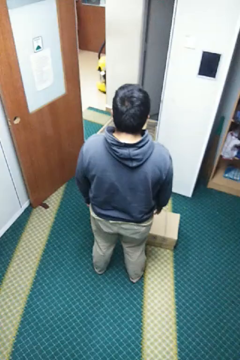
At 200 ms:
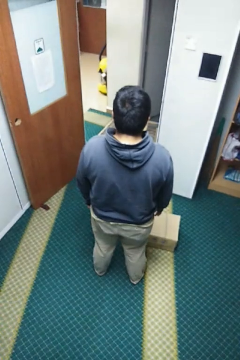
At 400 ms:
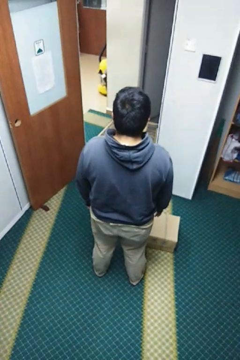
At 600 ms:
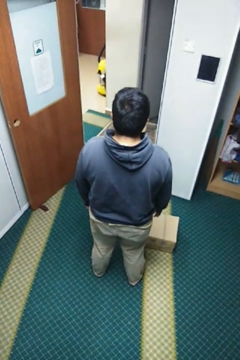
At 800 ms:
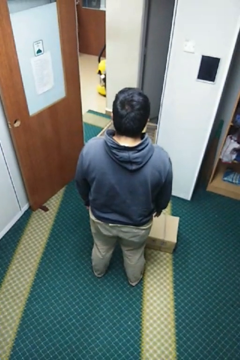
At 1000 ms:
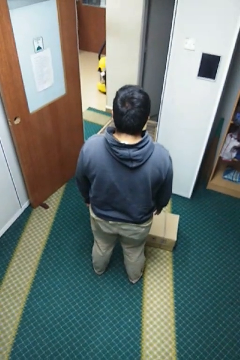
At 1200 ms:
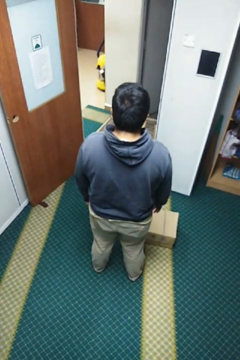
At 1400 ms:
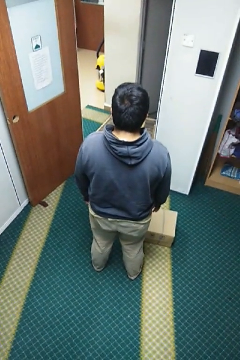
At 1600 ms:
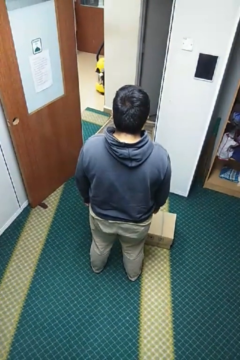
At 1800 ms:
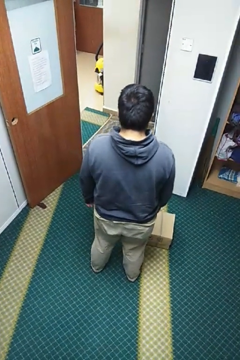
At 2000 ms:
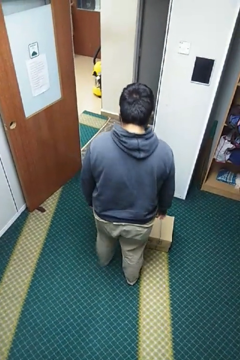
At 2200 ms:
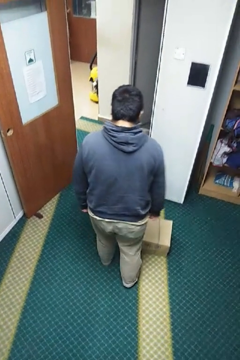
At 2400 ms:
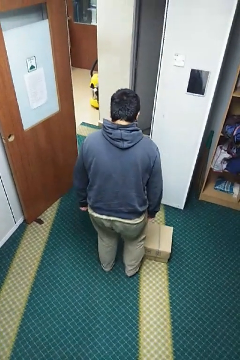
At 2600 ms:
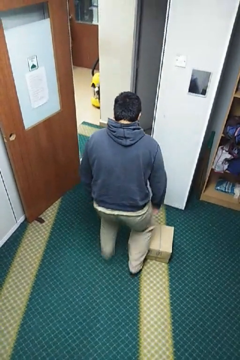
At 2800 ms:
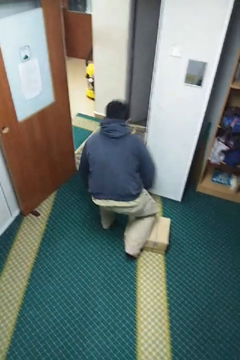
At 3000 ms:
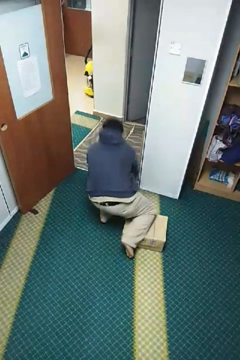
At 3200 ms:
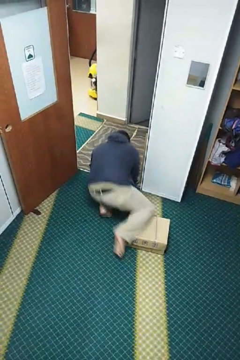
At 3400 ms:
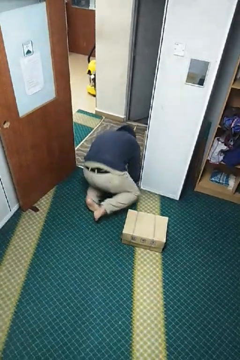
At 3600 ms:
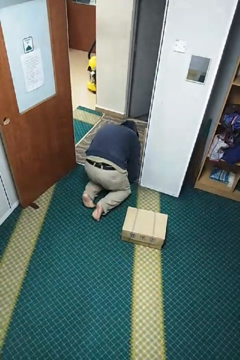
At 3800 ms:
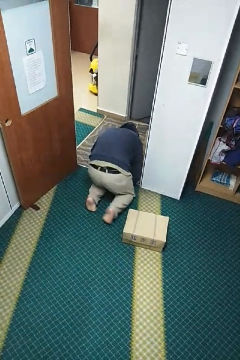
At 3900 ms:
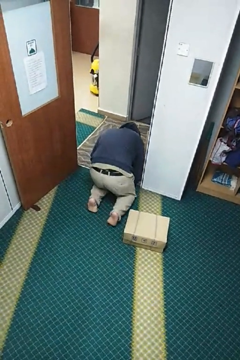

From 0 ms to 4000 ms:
person trips on object on floor

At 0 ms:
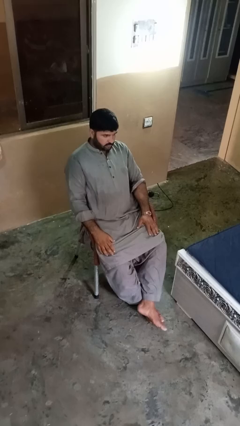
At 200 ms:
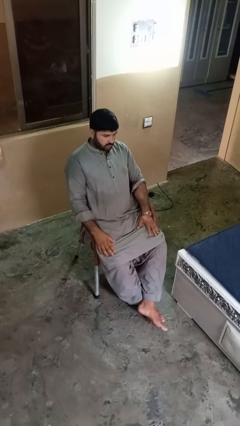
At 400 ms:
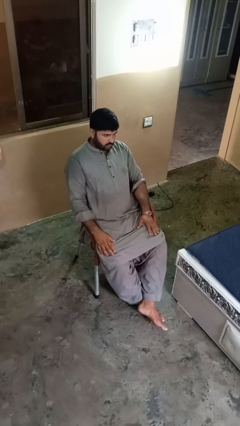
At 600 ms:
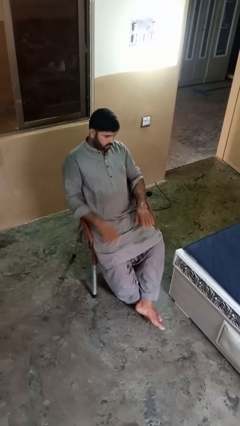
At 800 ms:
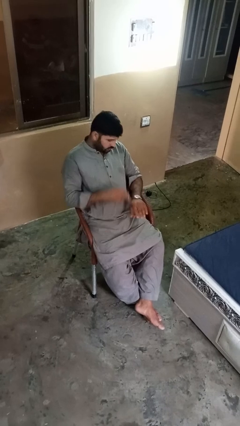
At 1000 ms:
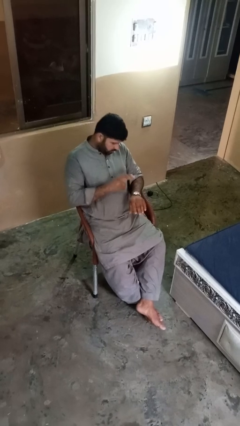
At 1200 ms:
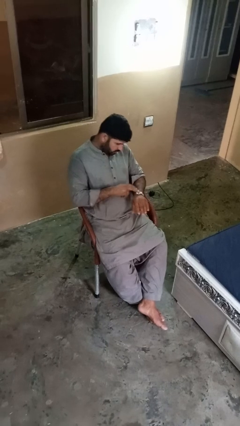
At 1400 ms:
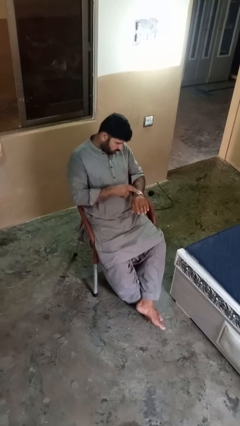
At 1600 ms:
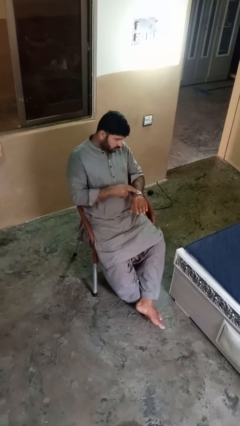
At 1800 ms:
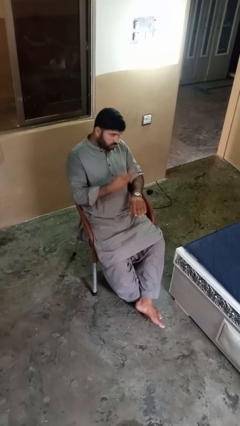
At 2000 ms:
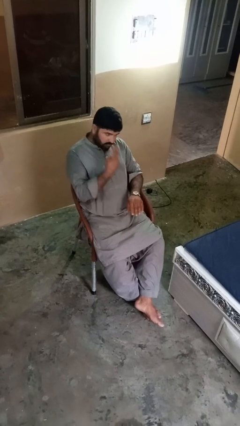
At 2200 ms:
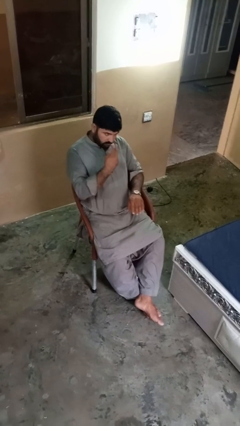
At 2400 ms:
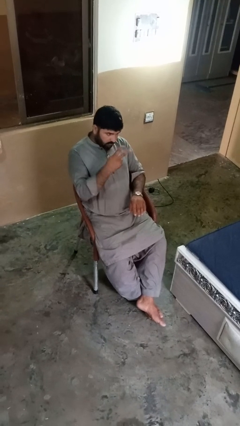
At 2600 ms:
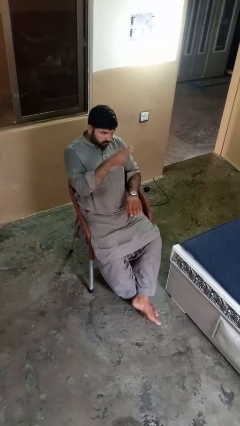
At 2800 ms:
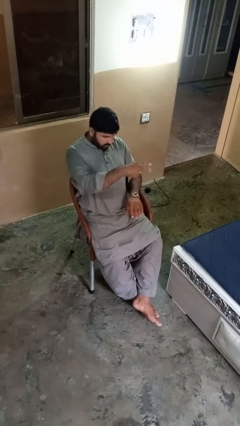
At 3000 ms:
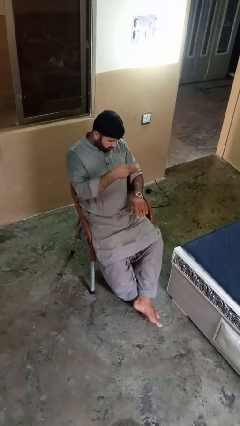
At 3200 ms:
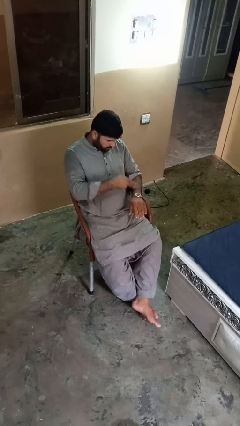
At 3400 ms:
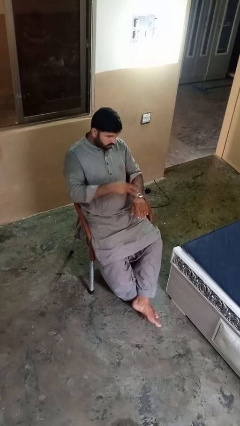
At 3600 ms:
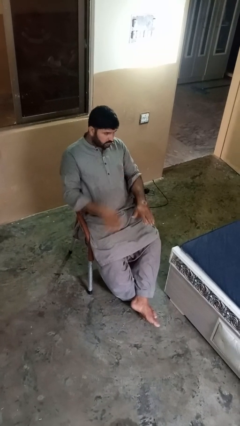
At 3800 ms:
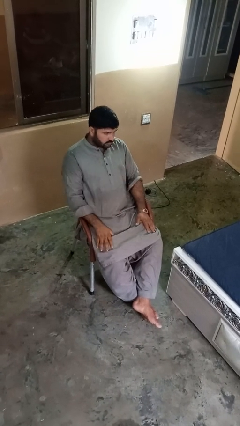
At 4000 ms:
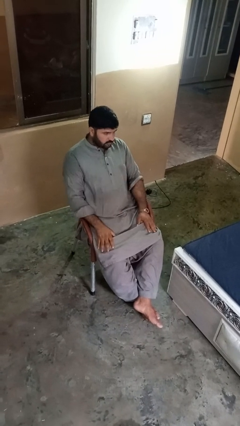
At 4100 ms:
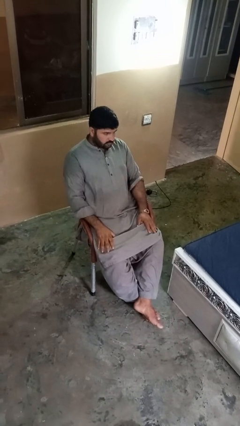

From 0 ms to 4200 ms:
person gestures watch closely

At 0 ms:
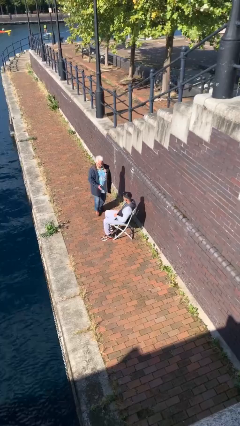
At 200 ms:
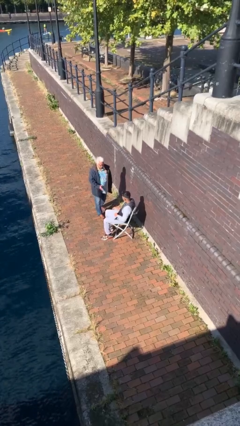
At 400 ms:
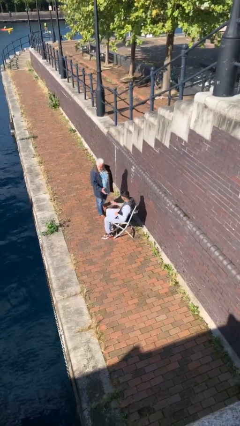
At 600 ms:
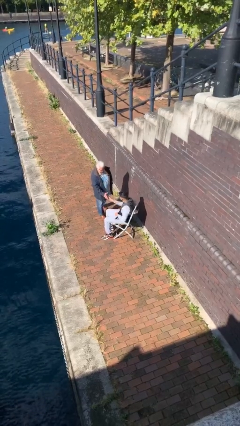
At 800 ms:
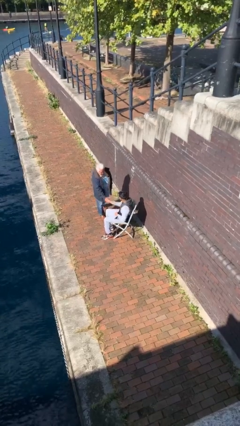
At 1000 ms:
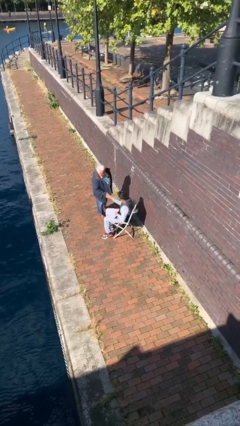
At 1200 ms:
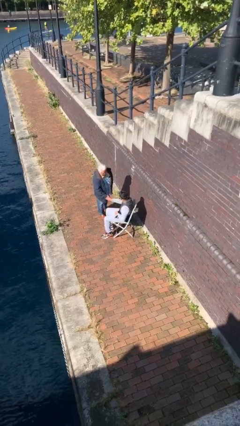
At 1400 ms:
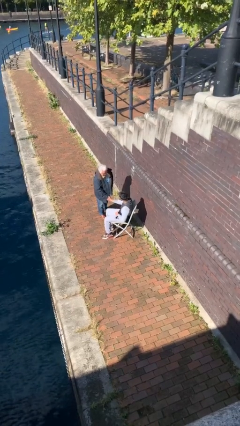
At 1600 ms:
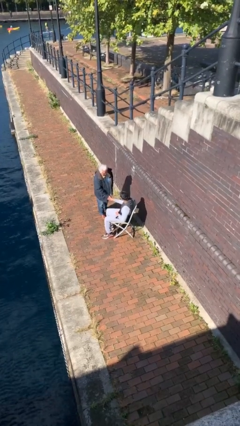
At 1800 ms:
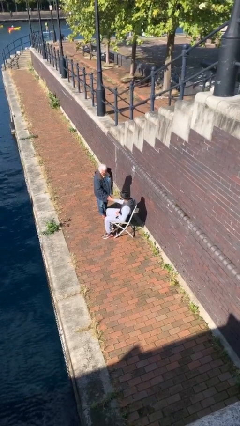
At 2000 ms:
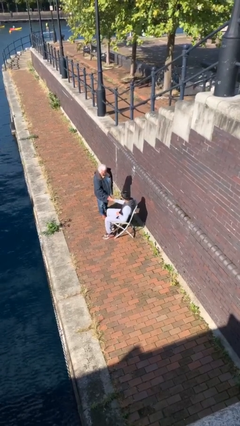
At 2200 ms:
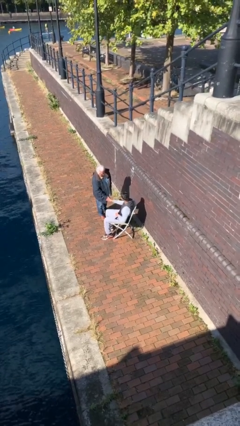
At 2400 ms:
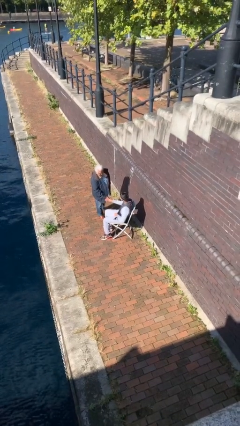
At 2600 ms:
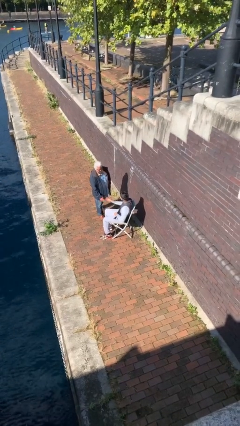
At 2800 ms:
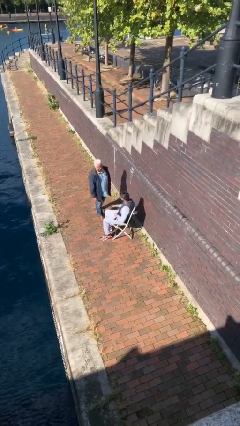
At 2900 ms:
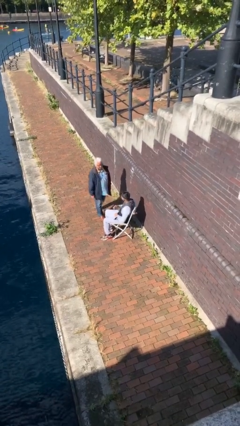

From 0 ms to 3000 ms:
person shakes hand

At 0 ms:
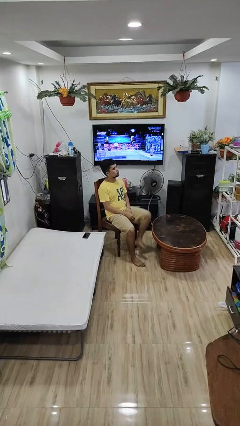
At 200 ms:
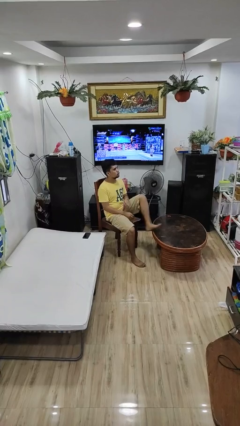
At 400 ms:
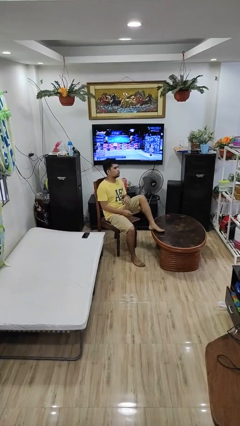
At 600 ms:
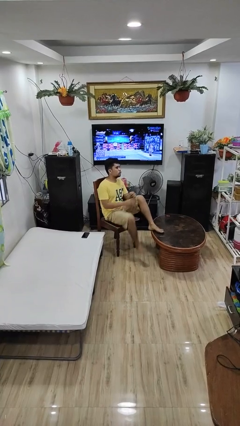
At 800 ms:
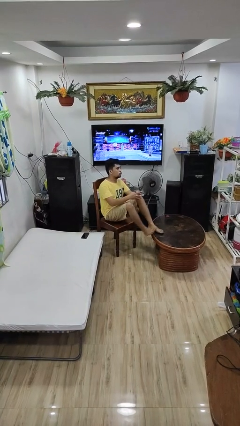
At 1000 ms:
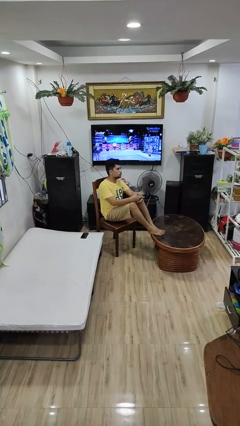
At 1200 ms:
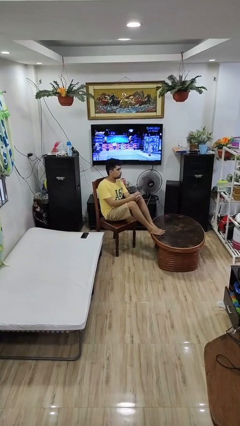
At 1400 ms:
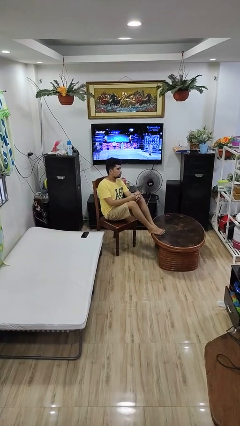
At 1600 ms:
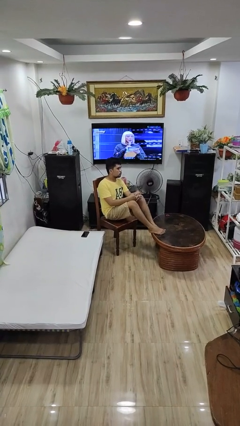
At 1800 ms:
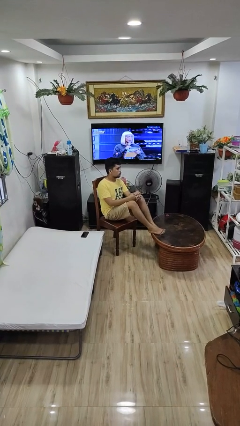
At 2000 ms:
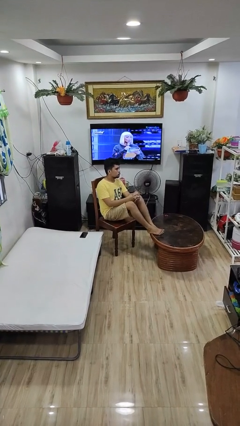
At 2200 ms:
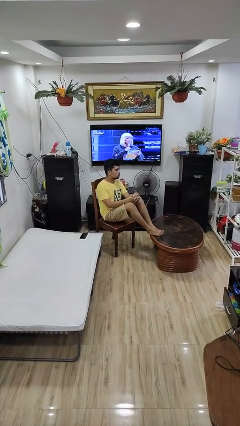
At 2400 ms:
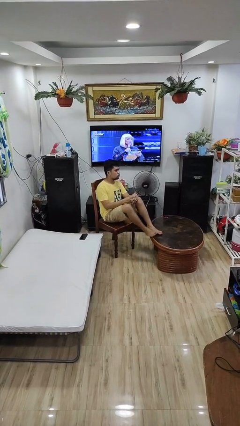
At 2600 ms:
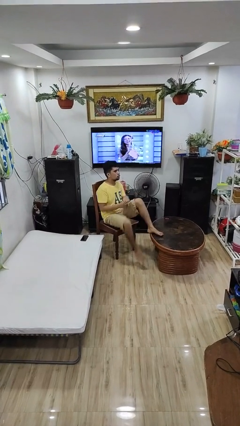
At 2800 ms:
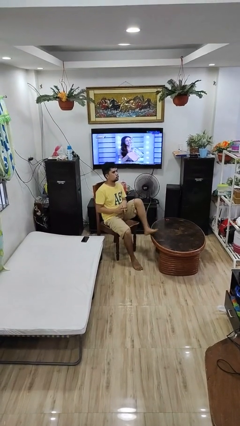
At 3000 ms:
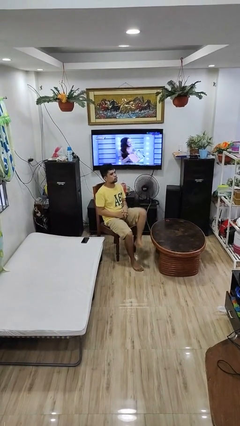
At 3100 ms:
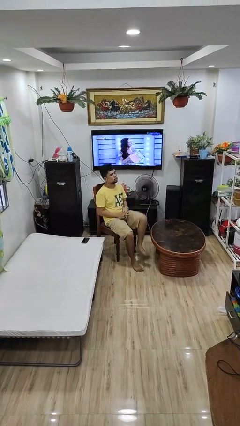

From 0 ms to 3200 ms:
person puts feet up

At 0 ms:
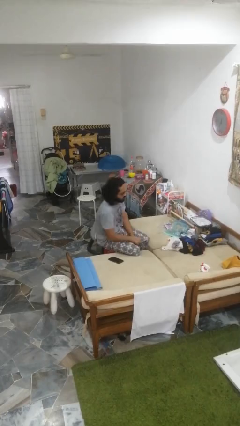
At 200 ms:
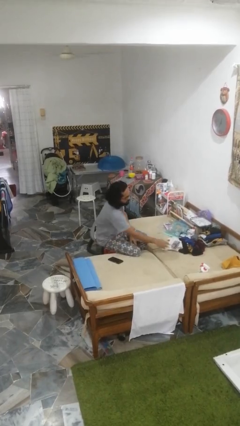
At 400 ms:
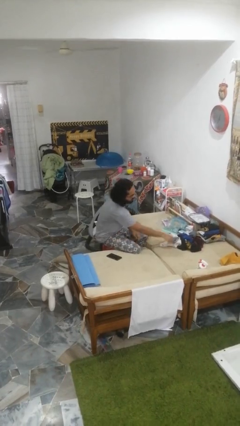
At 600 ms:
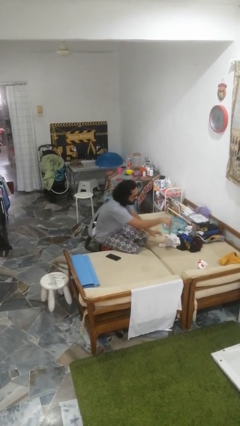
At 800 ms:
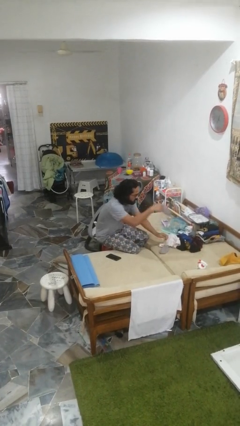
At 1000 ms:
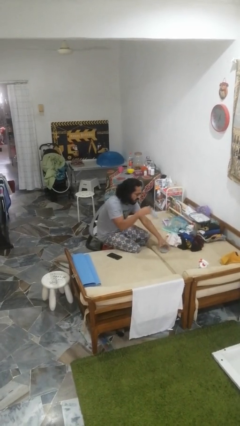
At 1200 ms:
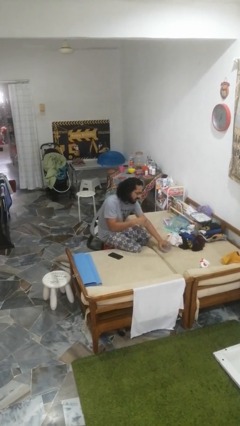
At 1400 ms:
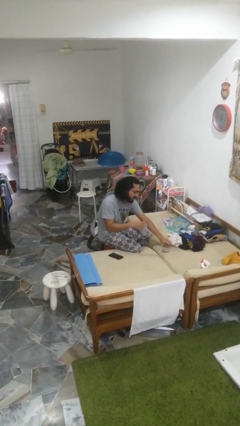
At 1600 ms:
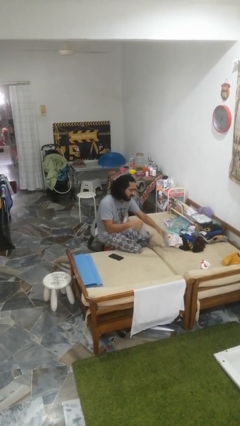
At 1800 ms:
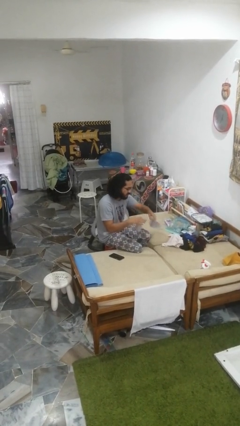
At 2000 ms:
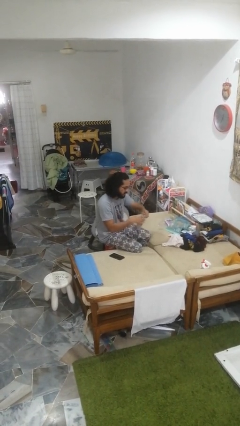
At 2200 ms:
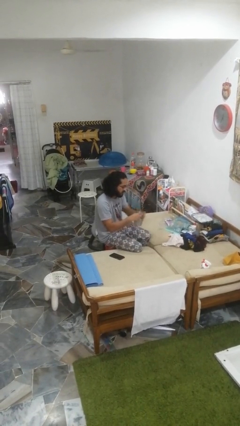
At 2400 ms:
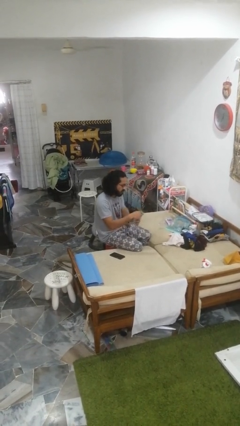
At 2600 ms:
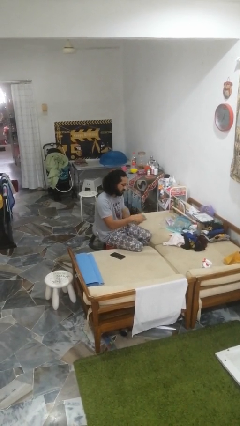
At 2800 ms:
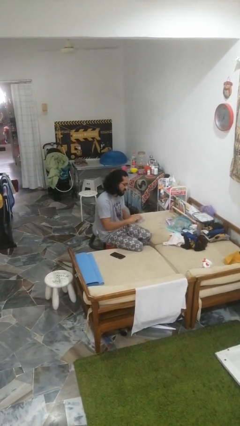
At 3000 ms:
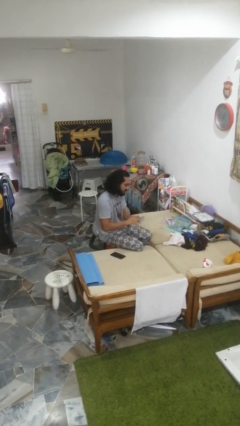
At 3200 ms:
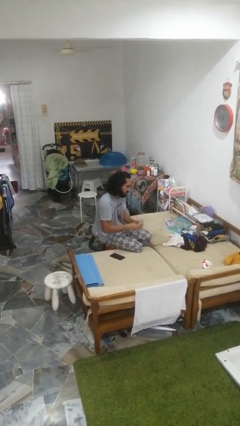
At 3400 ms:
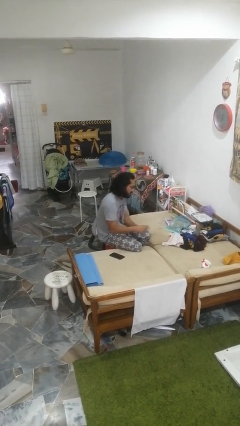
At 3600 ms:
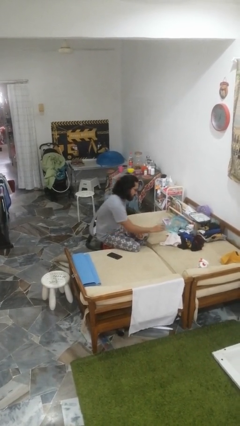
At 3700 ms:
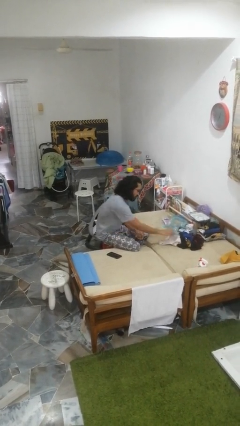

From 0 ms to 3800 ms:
person folds socks

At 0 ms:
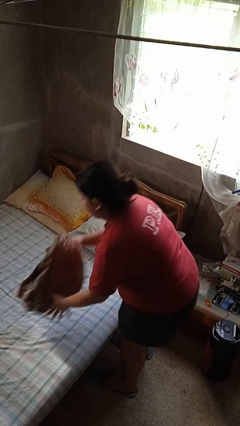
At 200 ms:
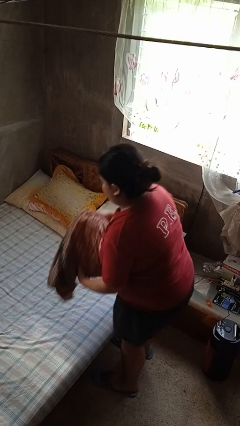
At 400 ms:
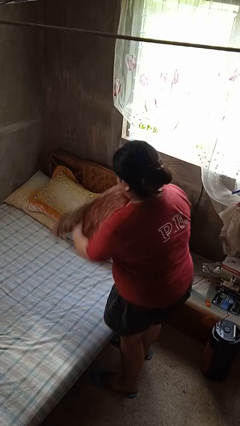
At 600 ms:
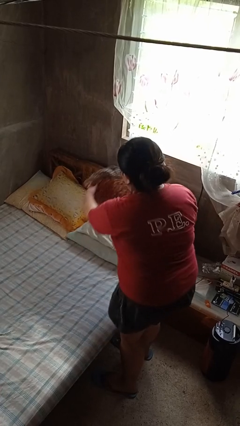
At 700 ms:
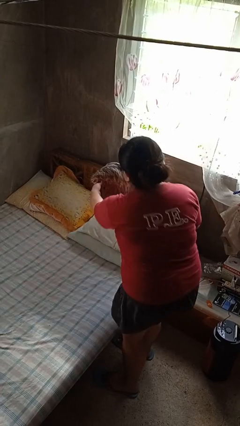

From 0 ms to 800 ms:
person makes bed
